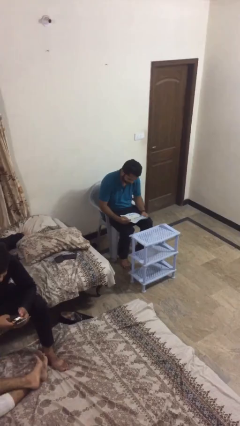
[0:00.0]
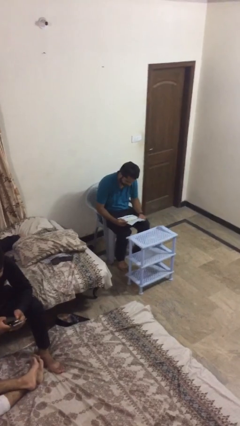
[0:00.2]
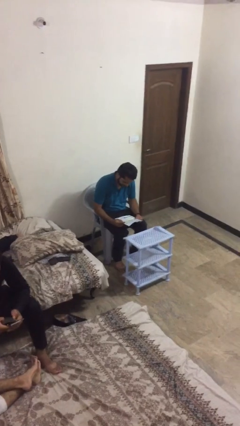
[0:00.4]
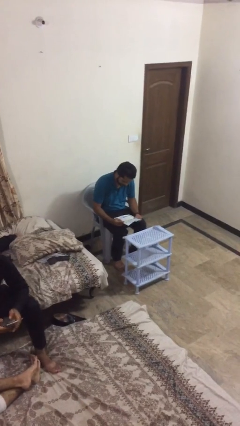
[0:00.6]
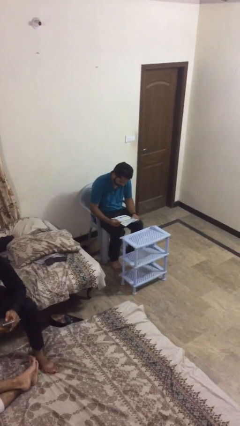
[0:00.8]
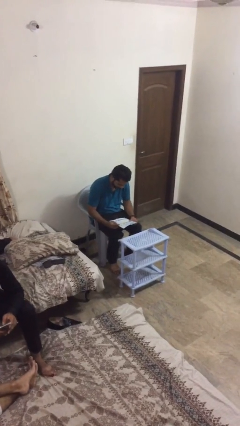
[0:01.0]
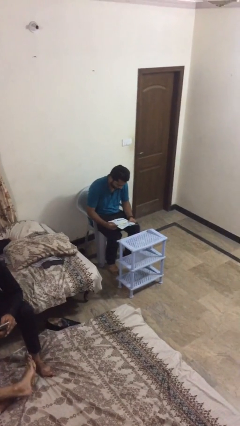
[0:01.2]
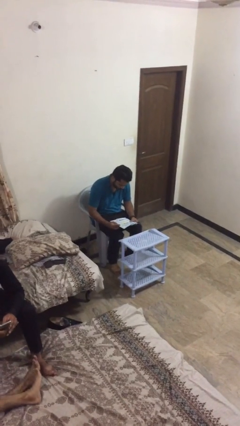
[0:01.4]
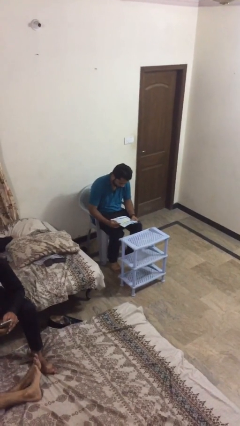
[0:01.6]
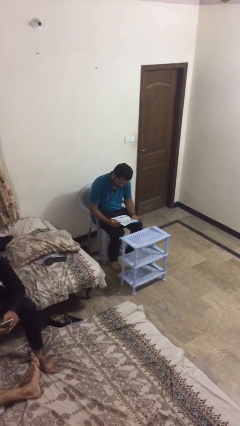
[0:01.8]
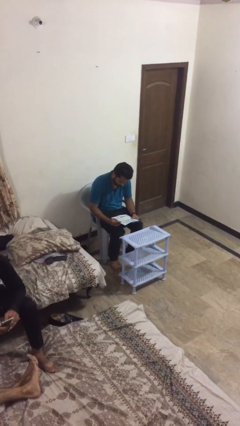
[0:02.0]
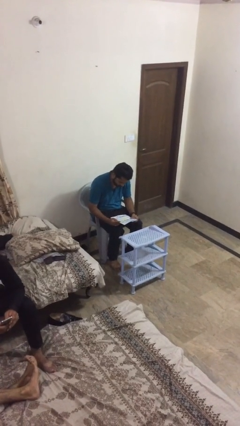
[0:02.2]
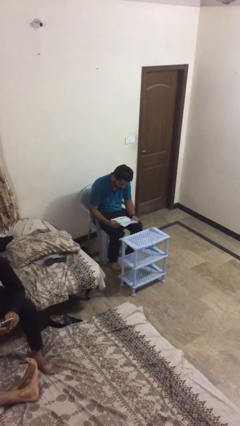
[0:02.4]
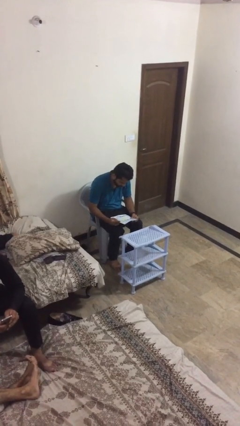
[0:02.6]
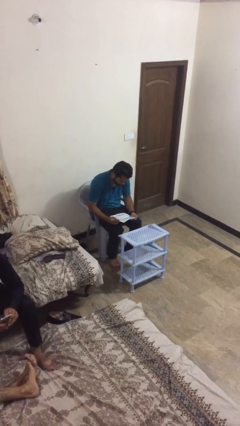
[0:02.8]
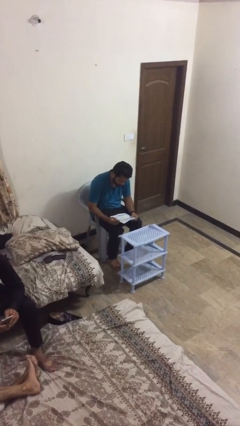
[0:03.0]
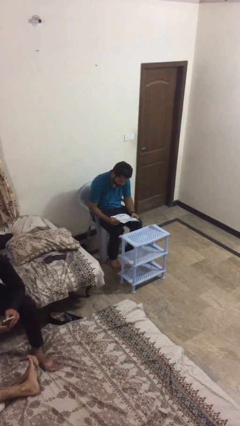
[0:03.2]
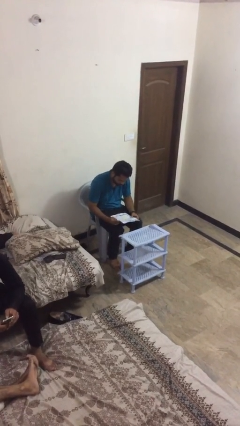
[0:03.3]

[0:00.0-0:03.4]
person reads document

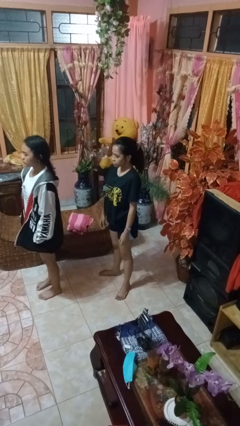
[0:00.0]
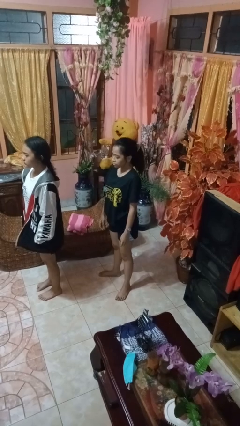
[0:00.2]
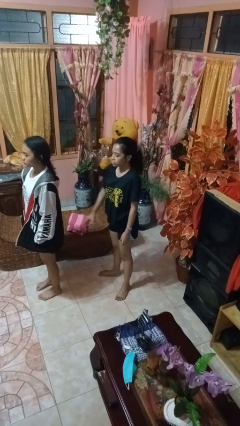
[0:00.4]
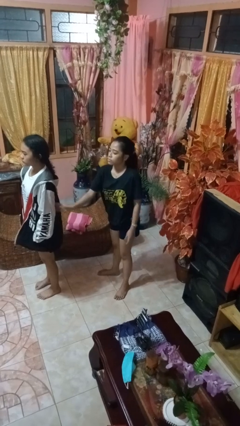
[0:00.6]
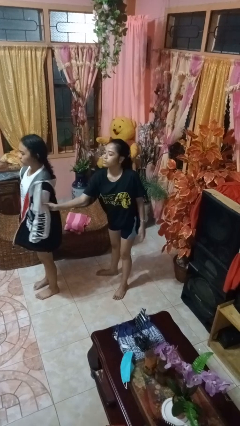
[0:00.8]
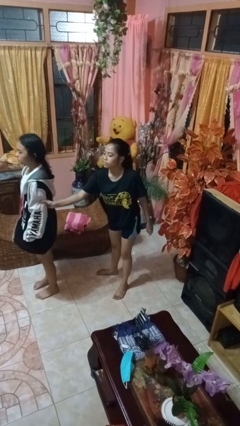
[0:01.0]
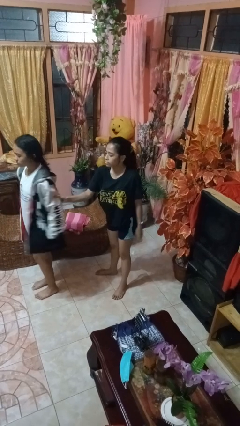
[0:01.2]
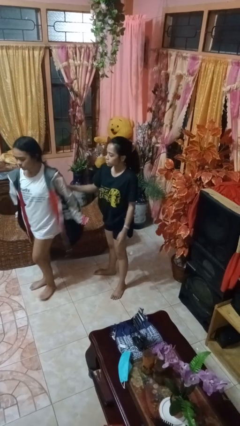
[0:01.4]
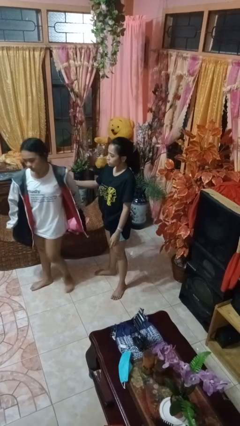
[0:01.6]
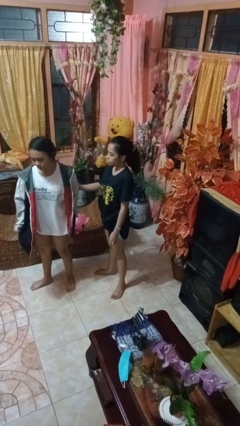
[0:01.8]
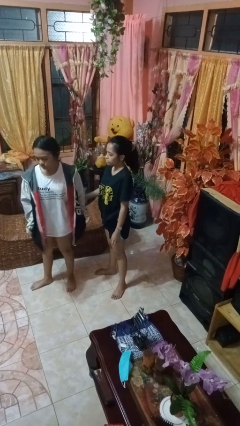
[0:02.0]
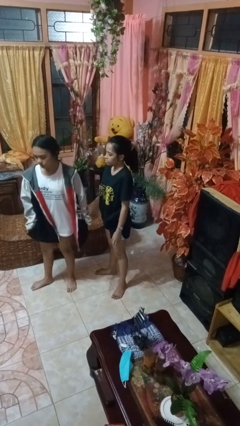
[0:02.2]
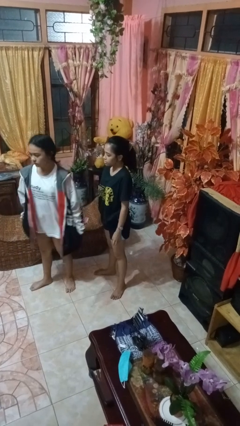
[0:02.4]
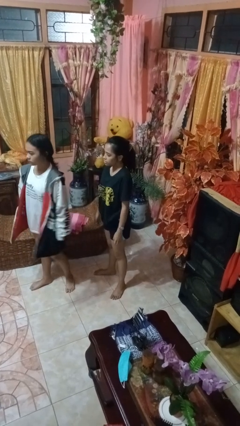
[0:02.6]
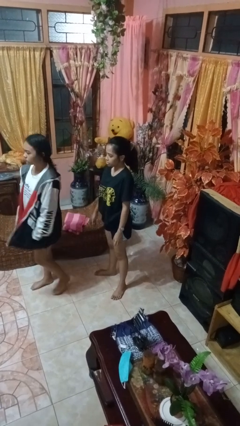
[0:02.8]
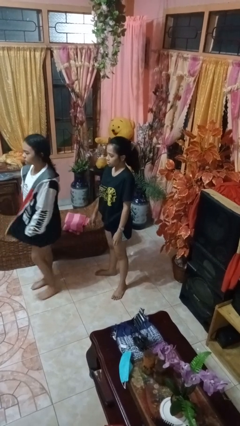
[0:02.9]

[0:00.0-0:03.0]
person grabs person by bicep

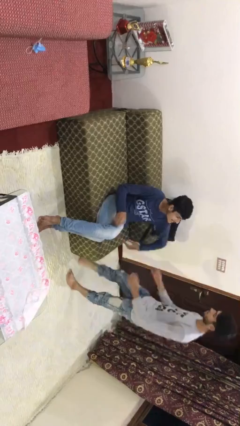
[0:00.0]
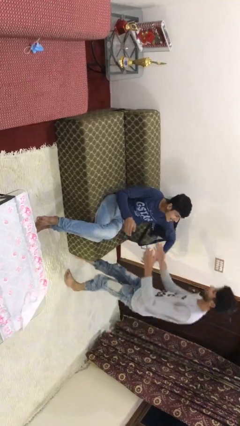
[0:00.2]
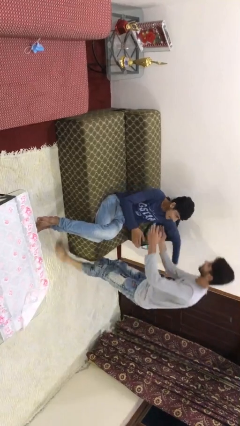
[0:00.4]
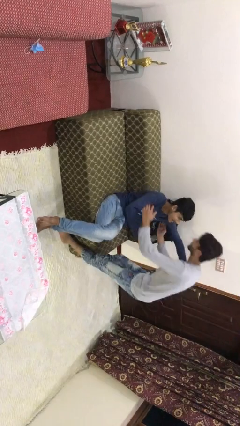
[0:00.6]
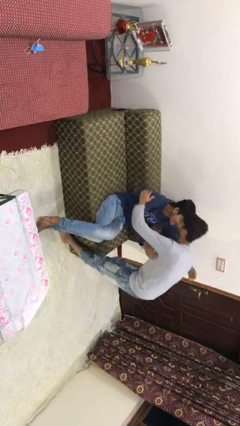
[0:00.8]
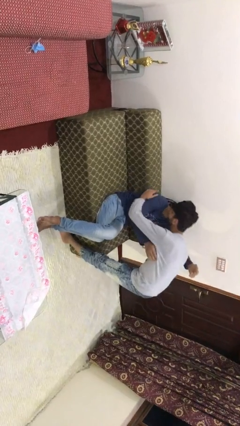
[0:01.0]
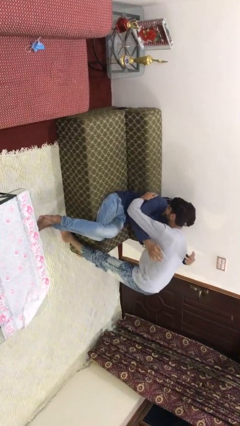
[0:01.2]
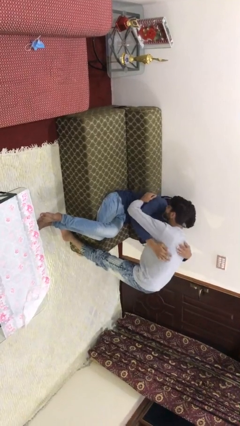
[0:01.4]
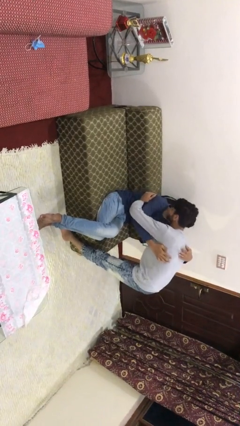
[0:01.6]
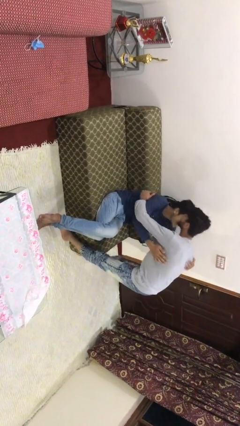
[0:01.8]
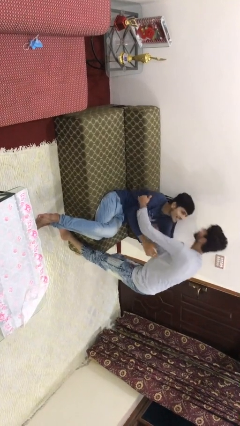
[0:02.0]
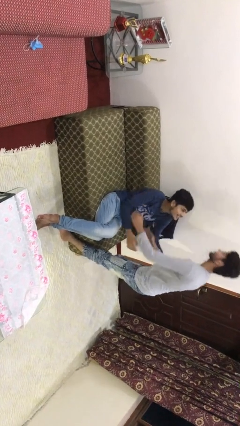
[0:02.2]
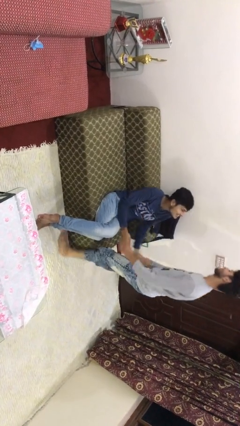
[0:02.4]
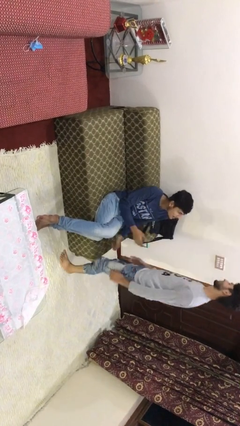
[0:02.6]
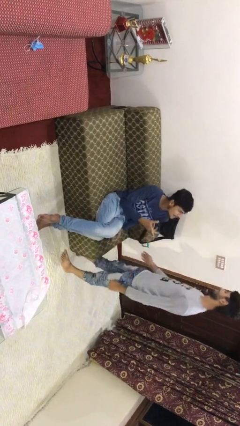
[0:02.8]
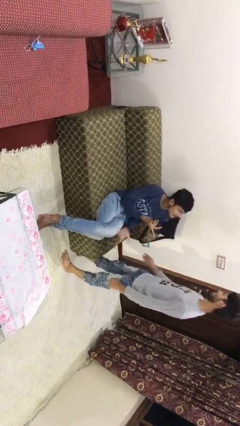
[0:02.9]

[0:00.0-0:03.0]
person embraces person

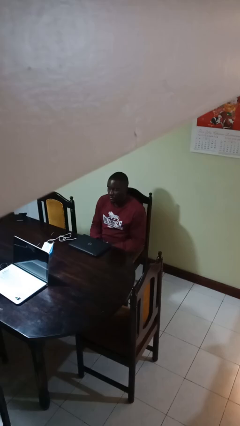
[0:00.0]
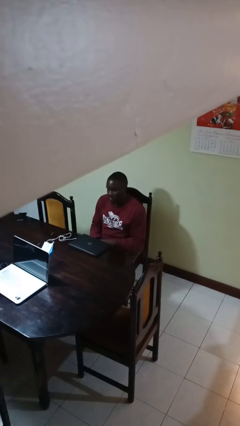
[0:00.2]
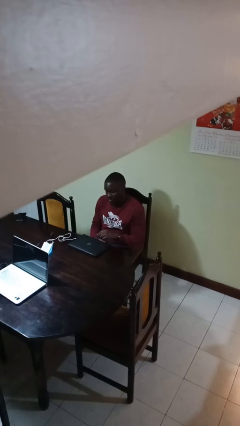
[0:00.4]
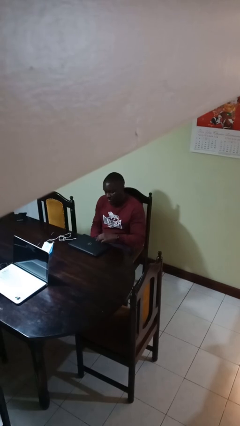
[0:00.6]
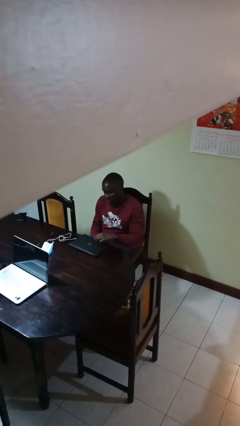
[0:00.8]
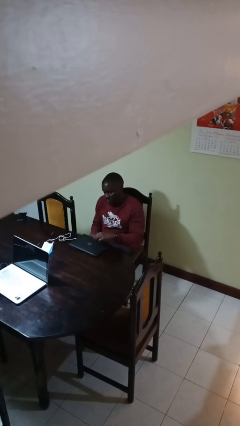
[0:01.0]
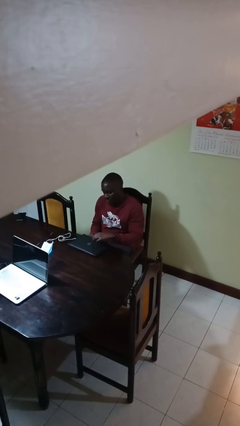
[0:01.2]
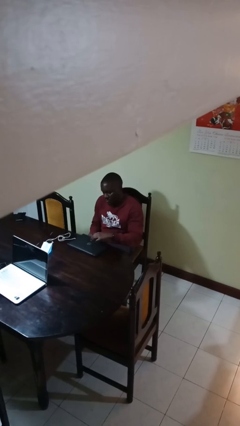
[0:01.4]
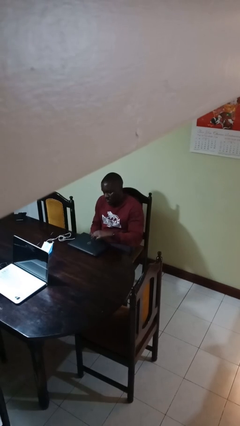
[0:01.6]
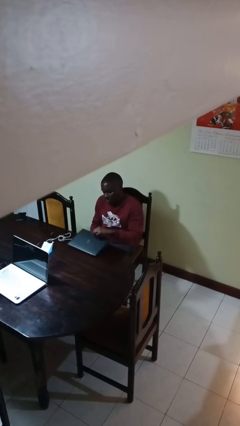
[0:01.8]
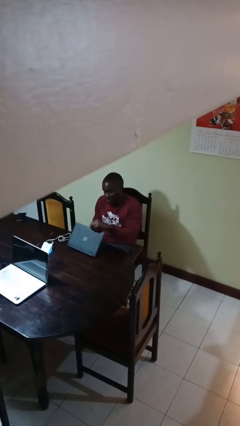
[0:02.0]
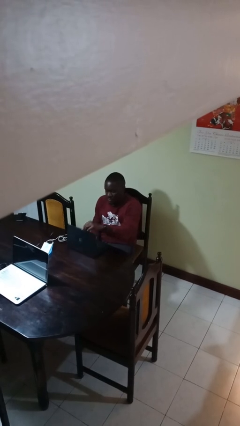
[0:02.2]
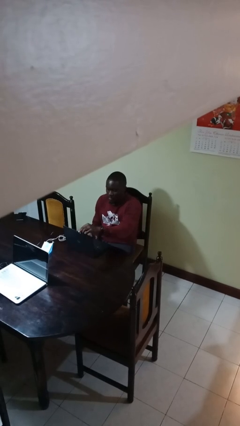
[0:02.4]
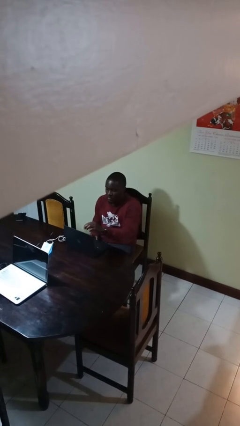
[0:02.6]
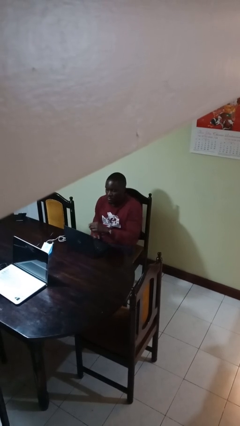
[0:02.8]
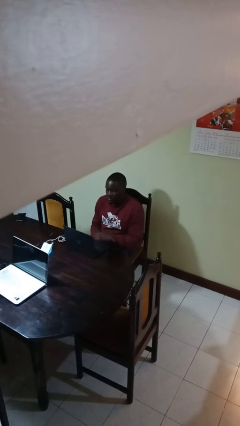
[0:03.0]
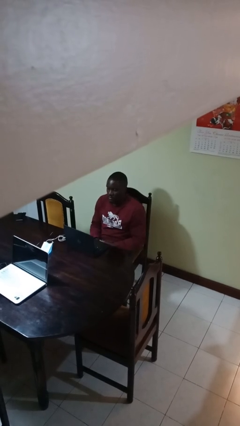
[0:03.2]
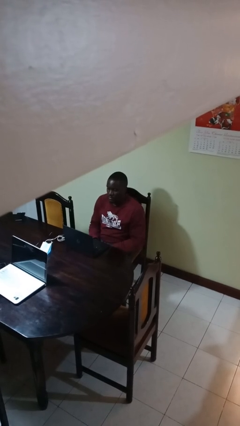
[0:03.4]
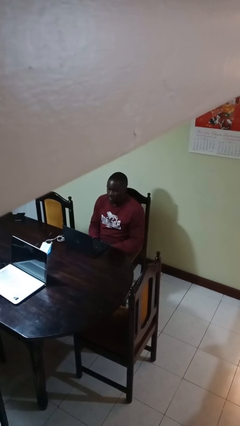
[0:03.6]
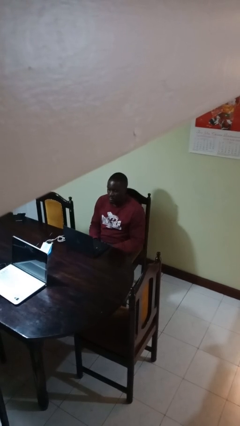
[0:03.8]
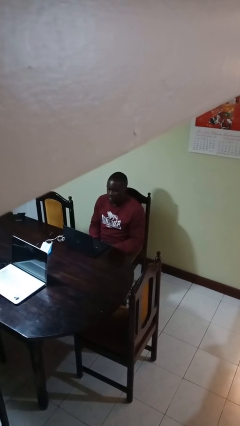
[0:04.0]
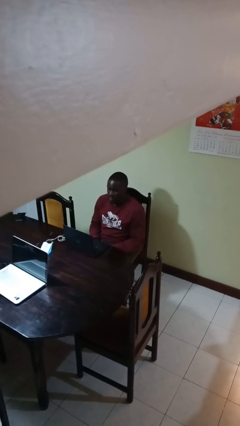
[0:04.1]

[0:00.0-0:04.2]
person opens laptop

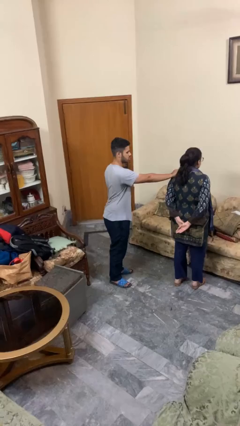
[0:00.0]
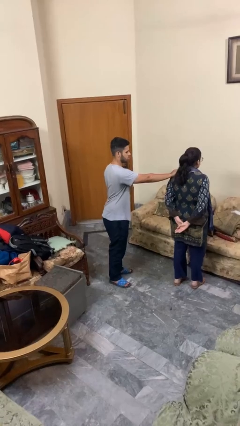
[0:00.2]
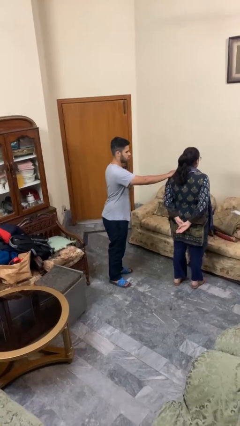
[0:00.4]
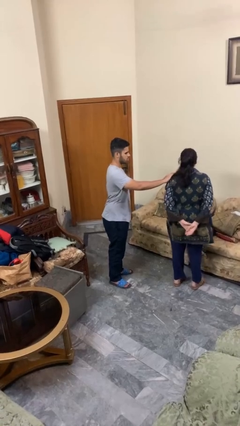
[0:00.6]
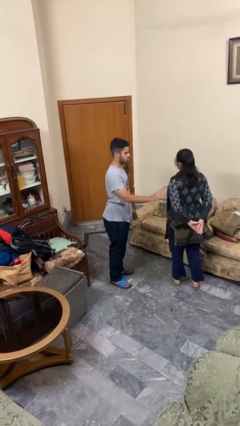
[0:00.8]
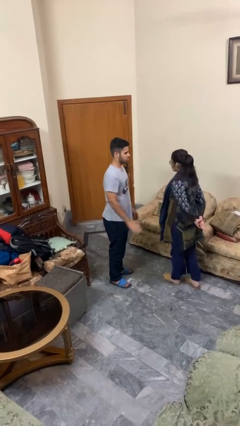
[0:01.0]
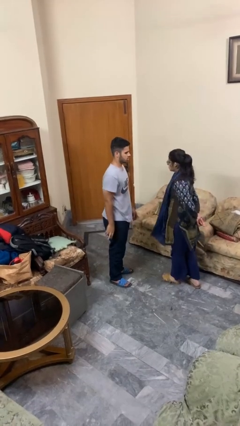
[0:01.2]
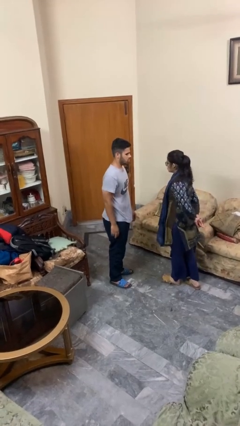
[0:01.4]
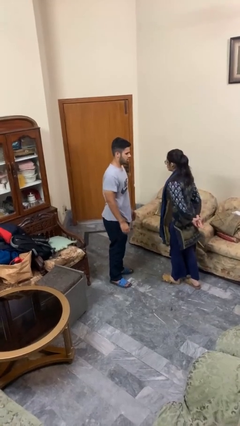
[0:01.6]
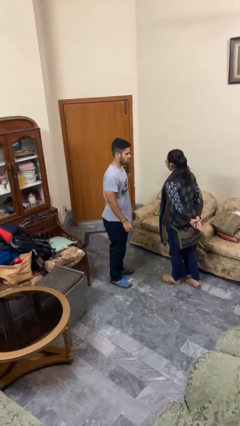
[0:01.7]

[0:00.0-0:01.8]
person spins person around

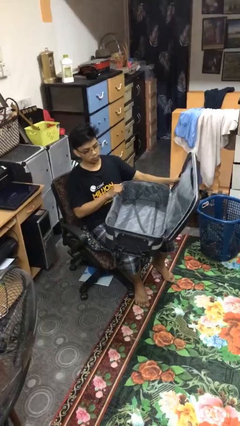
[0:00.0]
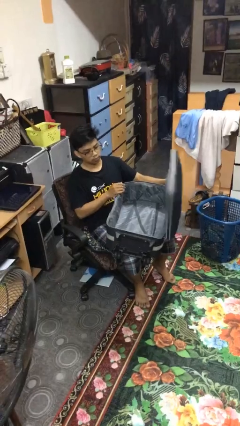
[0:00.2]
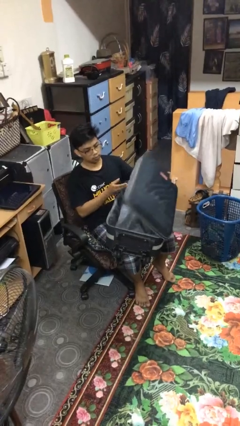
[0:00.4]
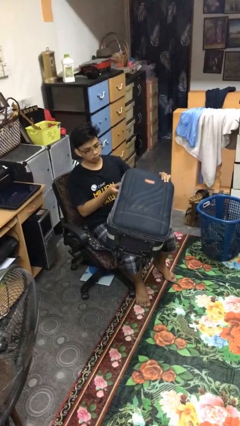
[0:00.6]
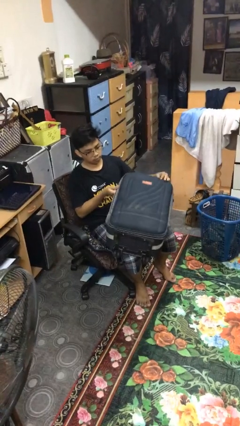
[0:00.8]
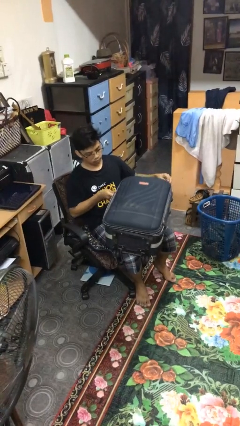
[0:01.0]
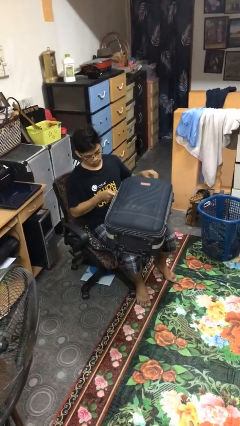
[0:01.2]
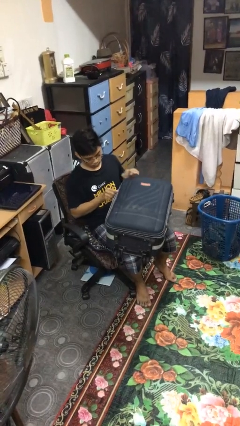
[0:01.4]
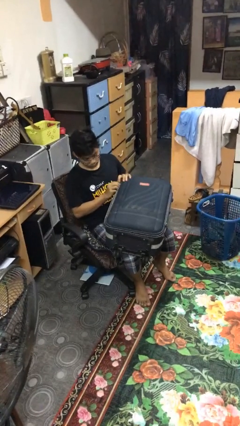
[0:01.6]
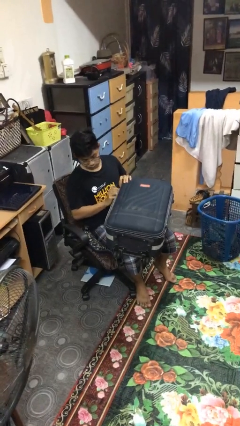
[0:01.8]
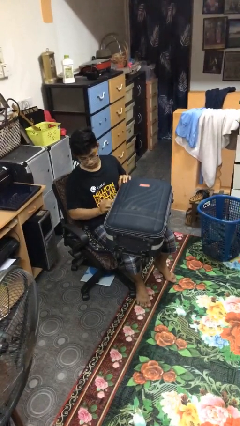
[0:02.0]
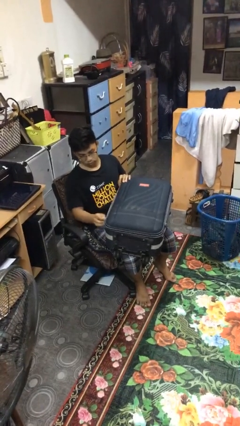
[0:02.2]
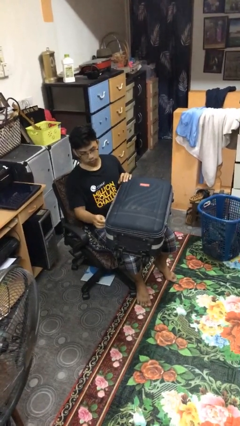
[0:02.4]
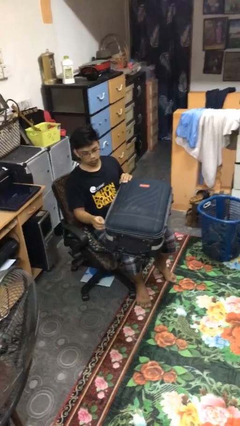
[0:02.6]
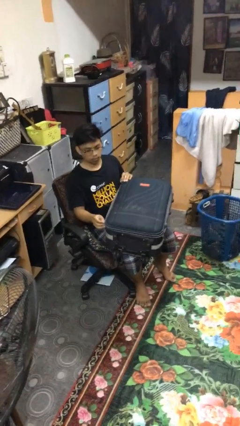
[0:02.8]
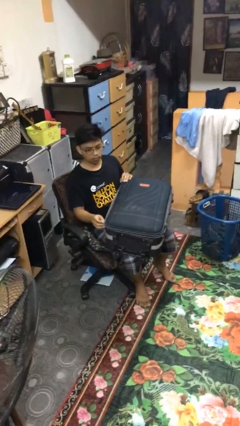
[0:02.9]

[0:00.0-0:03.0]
person closes suitcase
